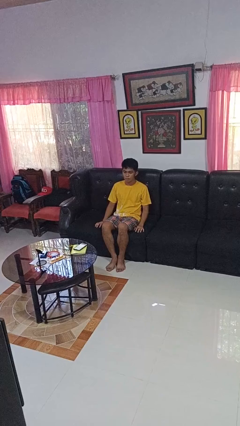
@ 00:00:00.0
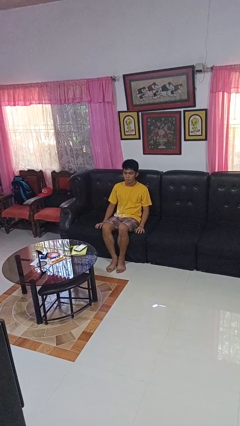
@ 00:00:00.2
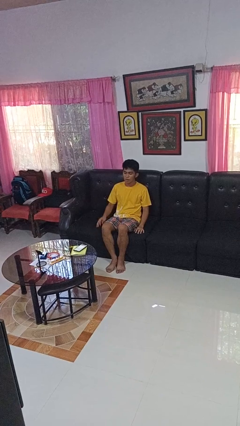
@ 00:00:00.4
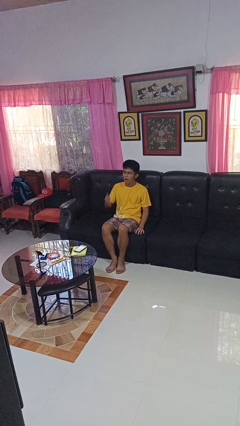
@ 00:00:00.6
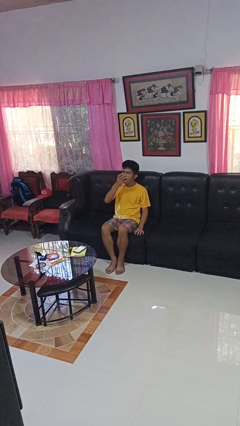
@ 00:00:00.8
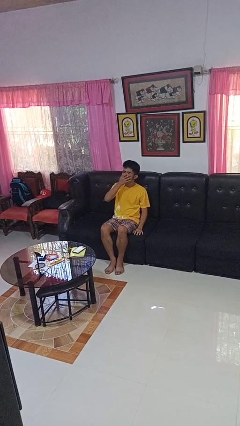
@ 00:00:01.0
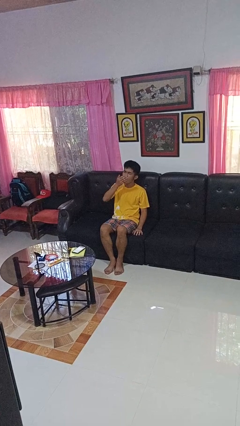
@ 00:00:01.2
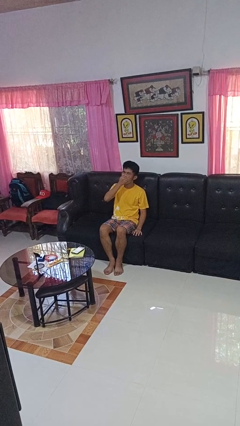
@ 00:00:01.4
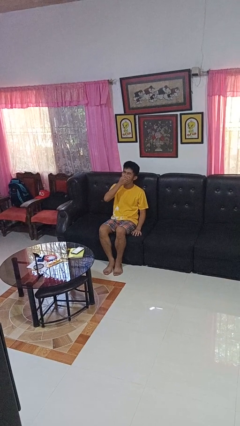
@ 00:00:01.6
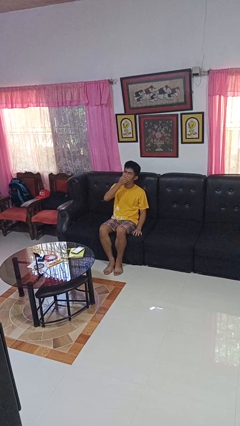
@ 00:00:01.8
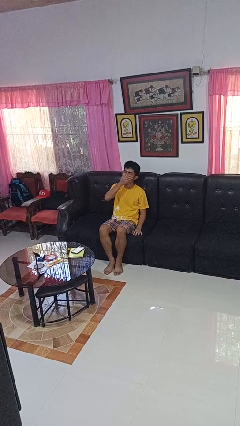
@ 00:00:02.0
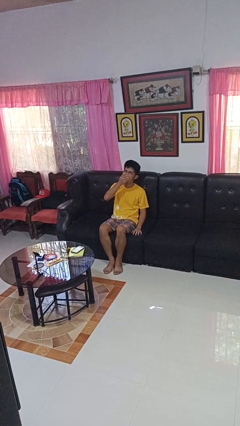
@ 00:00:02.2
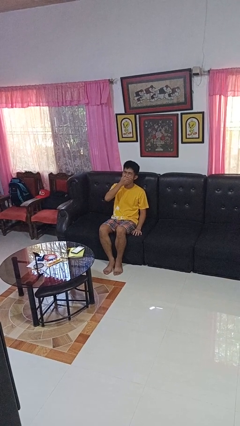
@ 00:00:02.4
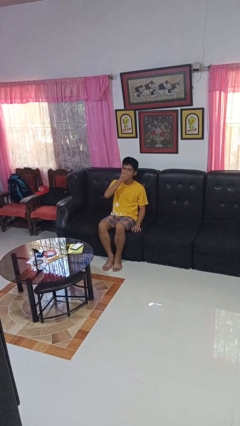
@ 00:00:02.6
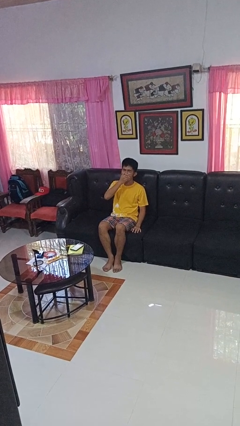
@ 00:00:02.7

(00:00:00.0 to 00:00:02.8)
person yawns

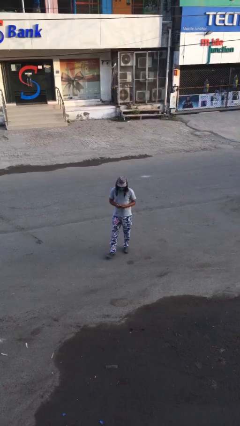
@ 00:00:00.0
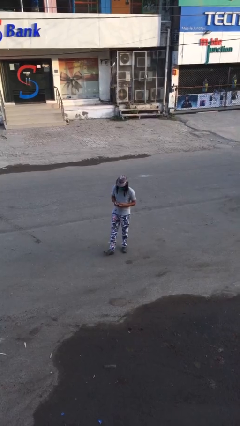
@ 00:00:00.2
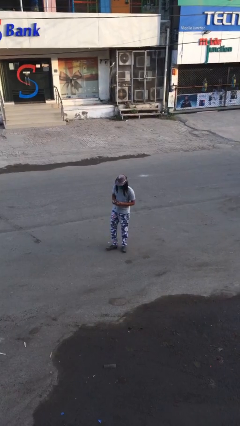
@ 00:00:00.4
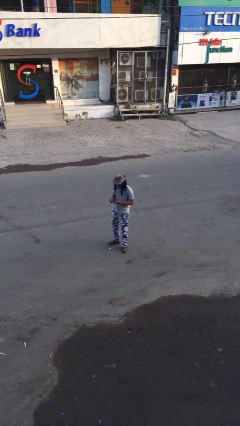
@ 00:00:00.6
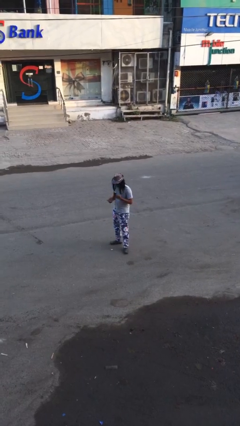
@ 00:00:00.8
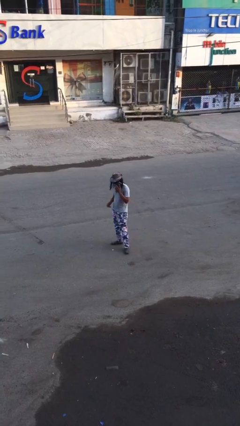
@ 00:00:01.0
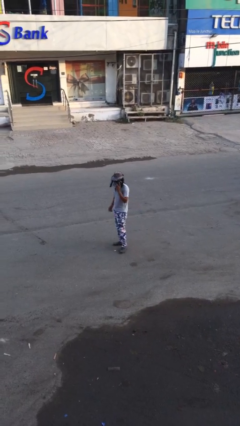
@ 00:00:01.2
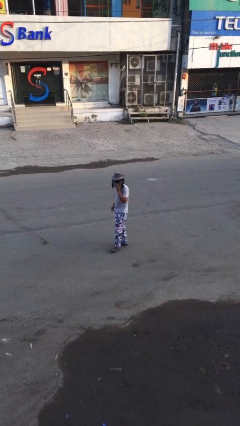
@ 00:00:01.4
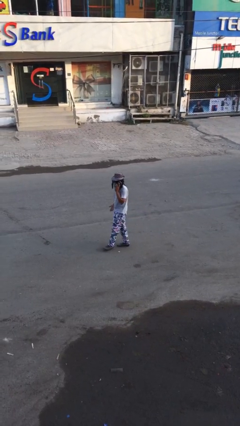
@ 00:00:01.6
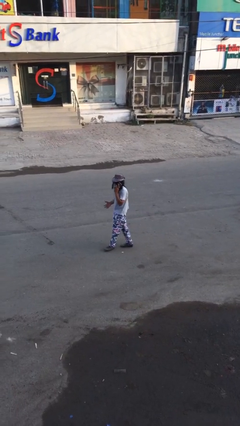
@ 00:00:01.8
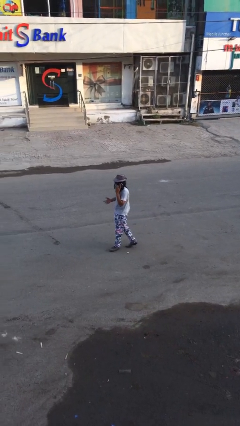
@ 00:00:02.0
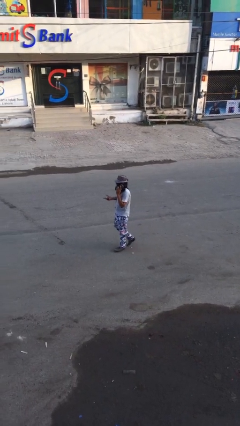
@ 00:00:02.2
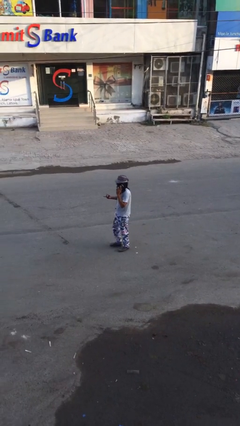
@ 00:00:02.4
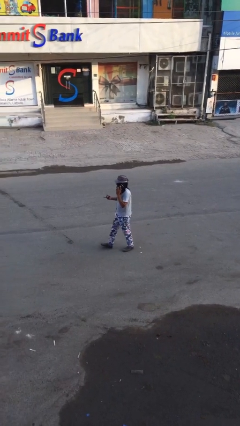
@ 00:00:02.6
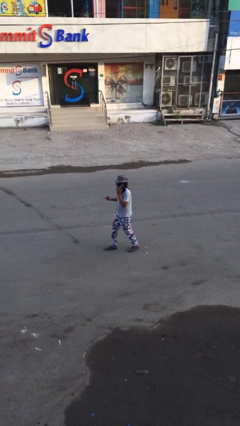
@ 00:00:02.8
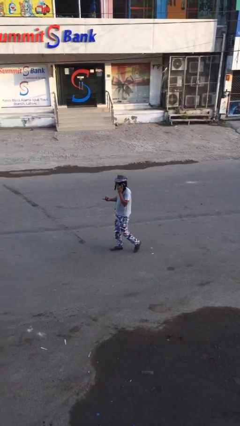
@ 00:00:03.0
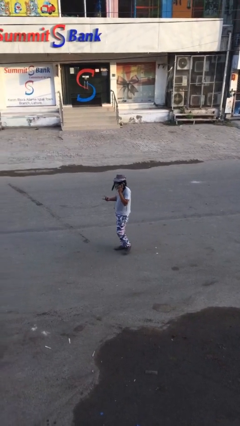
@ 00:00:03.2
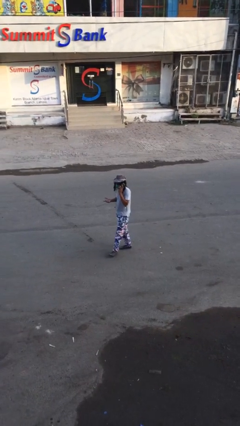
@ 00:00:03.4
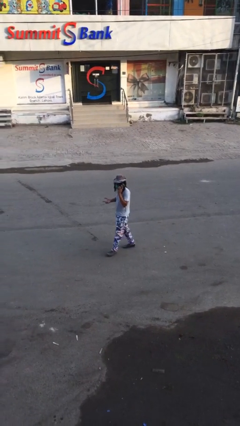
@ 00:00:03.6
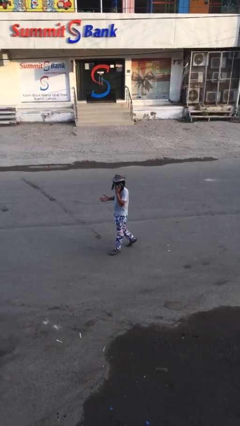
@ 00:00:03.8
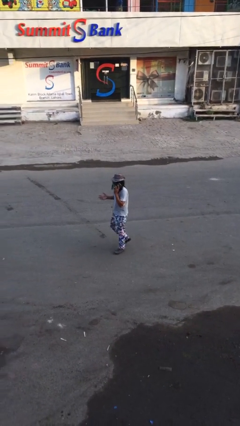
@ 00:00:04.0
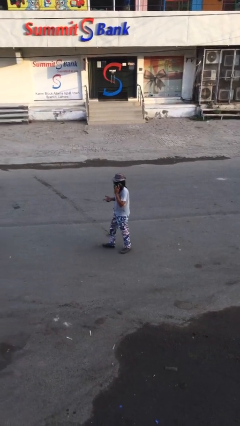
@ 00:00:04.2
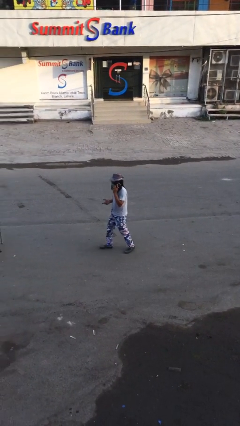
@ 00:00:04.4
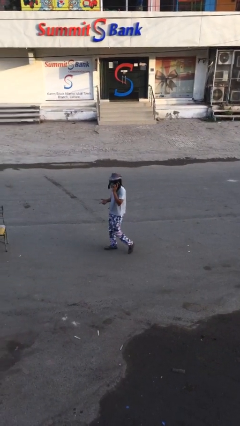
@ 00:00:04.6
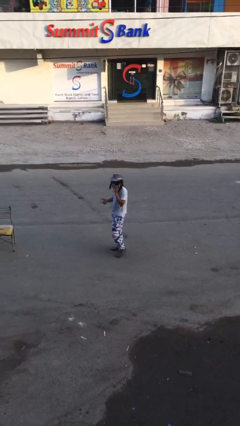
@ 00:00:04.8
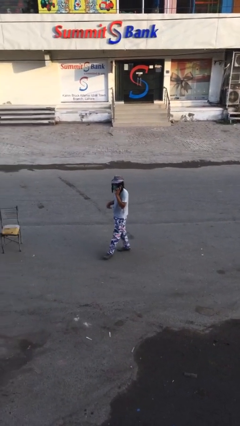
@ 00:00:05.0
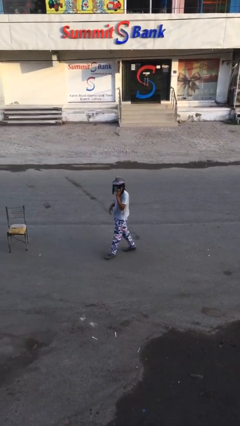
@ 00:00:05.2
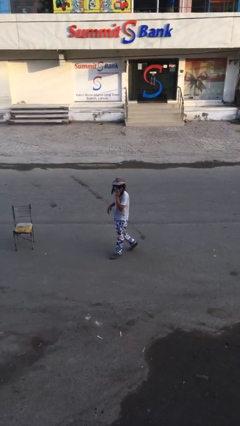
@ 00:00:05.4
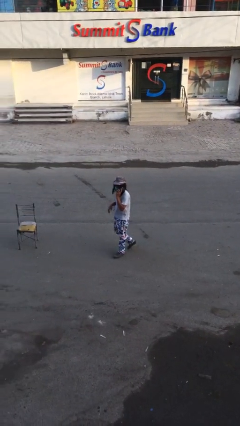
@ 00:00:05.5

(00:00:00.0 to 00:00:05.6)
person talks on phone

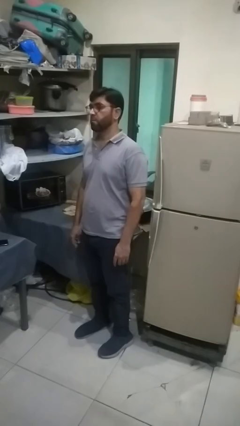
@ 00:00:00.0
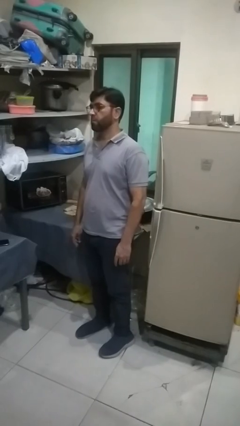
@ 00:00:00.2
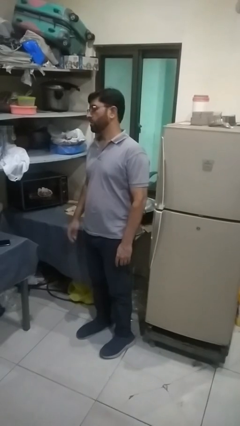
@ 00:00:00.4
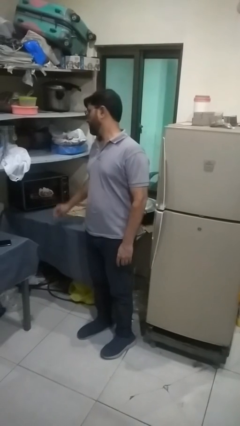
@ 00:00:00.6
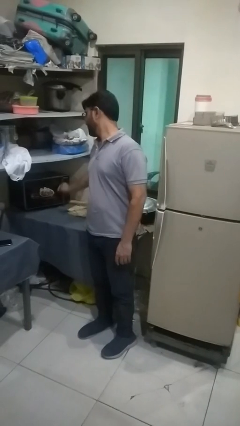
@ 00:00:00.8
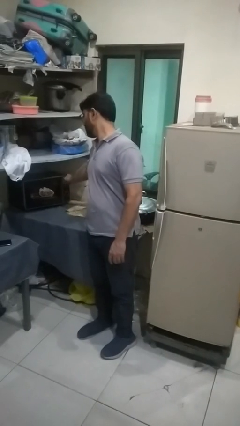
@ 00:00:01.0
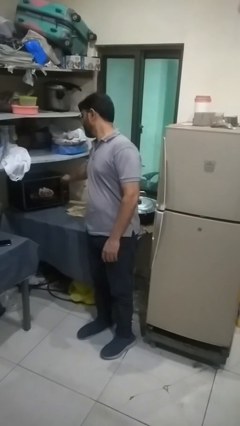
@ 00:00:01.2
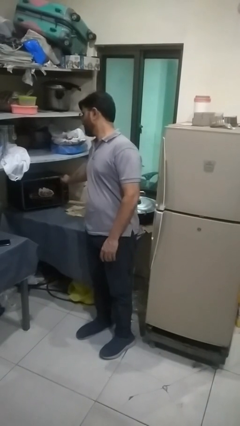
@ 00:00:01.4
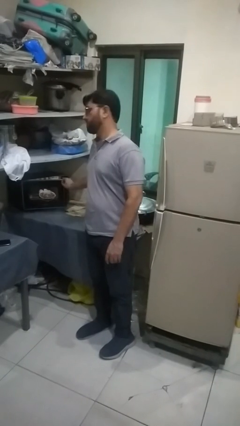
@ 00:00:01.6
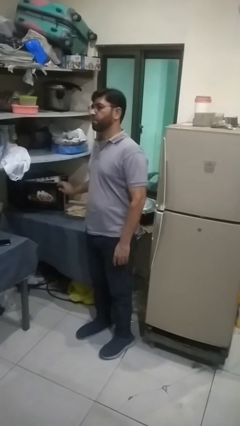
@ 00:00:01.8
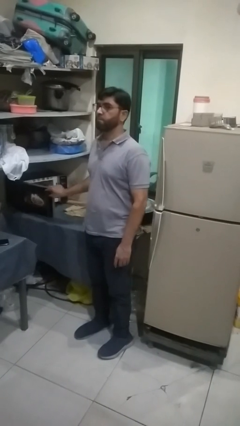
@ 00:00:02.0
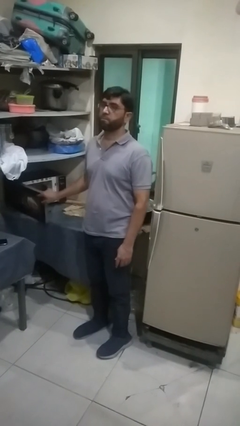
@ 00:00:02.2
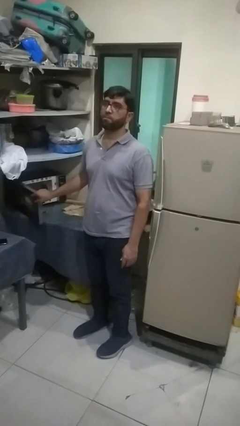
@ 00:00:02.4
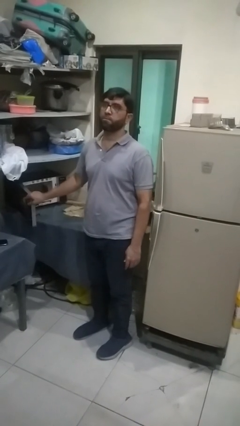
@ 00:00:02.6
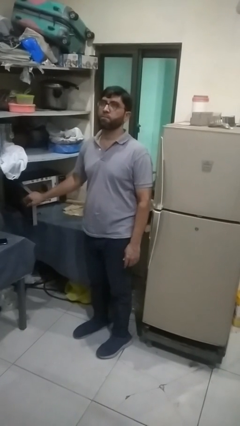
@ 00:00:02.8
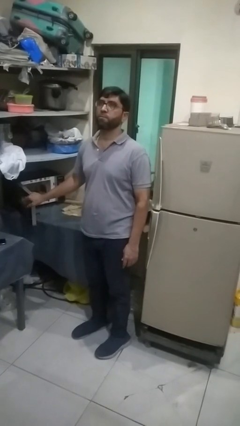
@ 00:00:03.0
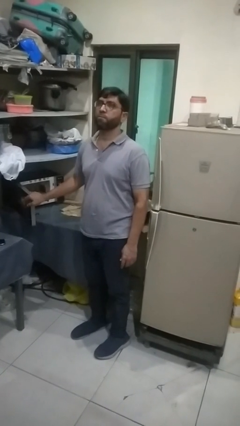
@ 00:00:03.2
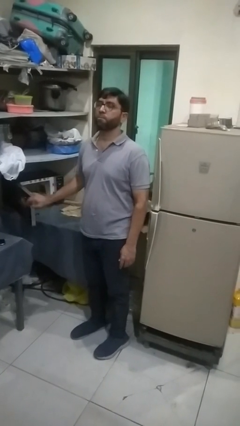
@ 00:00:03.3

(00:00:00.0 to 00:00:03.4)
person opens oven door

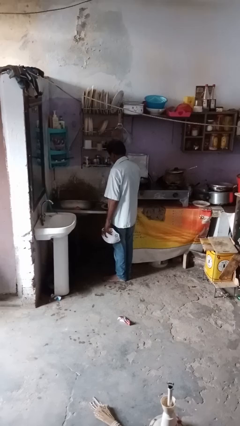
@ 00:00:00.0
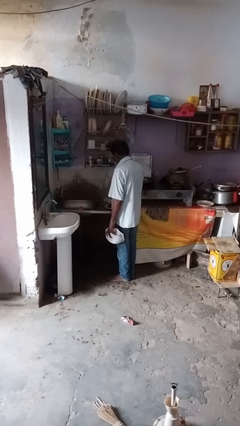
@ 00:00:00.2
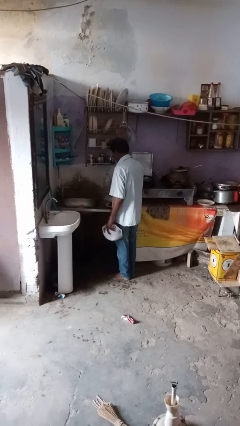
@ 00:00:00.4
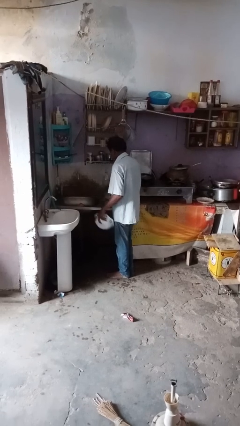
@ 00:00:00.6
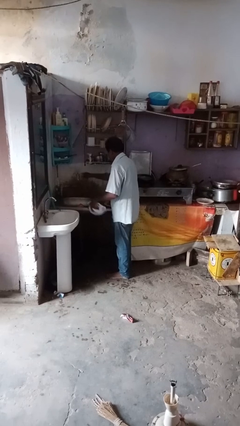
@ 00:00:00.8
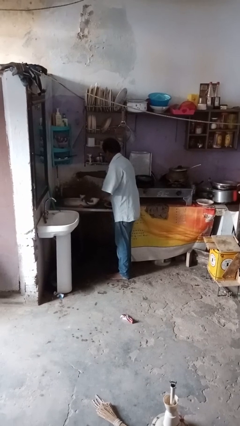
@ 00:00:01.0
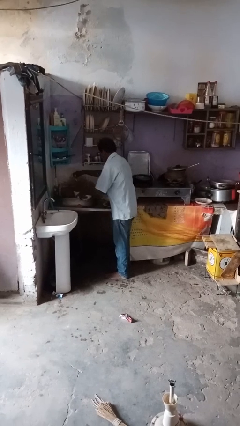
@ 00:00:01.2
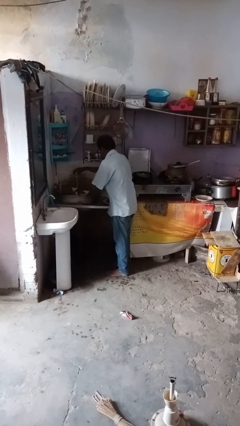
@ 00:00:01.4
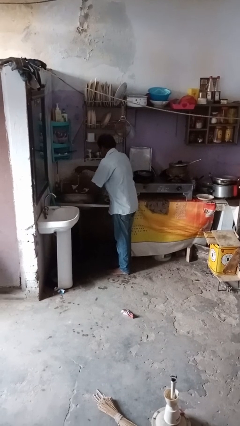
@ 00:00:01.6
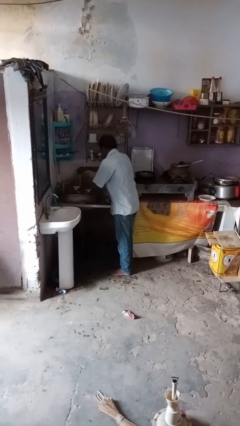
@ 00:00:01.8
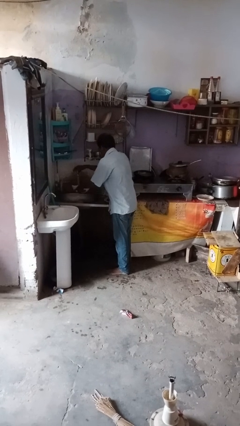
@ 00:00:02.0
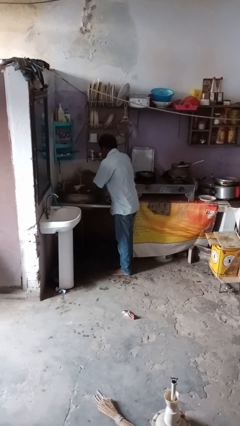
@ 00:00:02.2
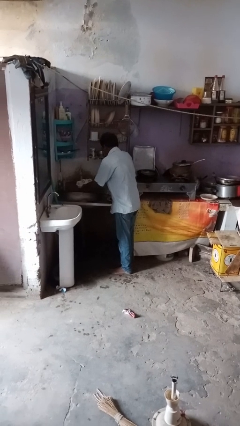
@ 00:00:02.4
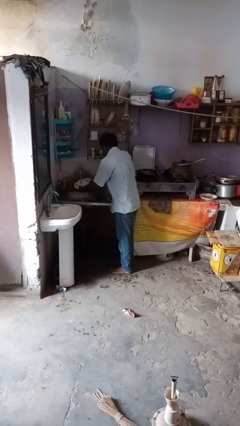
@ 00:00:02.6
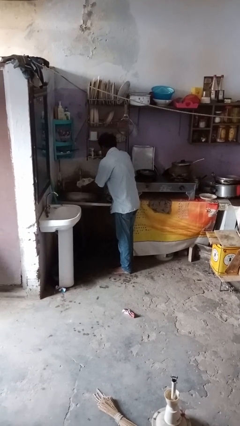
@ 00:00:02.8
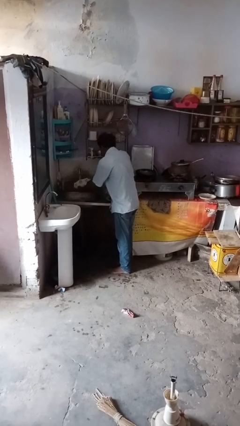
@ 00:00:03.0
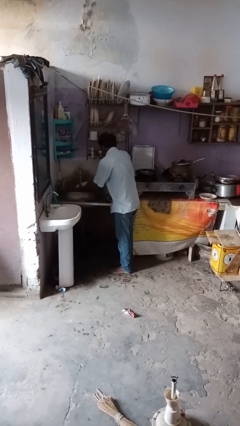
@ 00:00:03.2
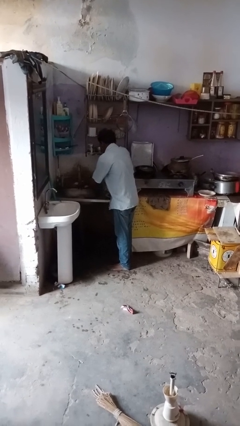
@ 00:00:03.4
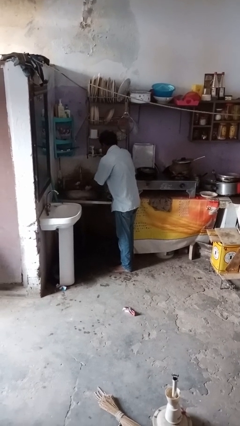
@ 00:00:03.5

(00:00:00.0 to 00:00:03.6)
person washes dish

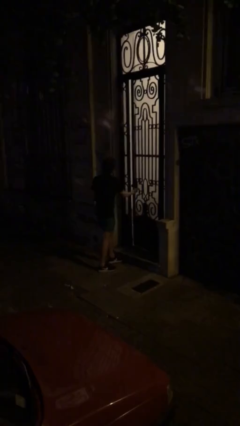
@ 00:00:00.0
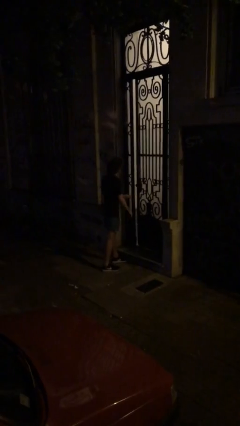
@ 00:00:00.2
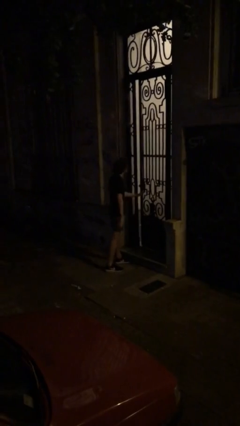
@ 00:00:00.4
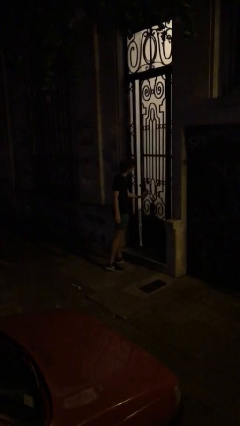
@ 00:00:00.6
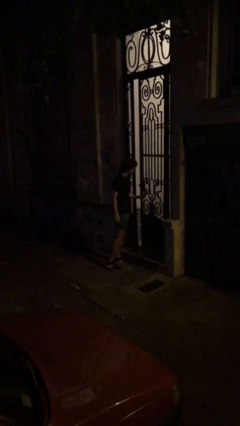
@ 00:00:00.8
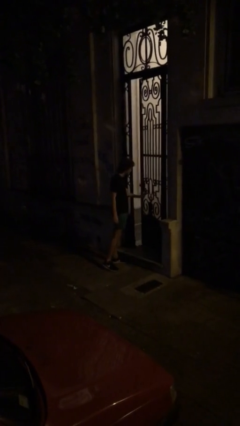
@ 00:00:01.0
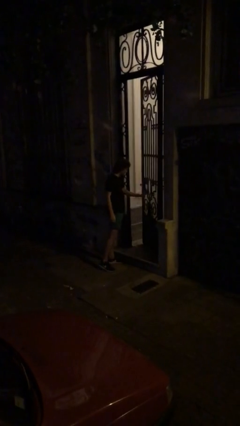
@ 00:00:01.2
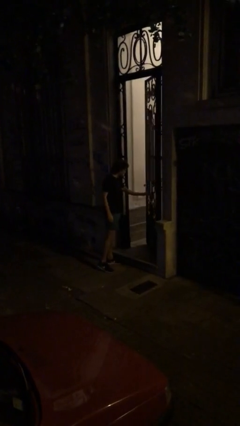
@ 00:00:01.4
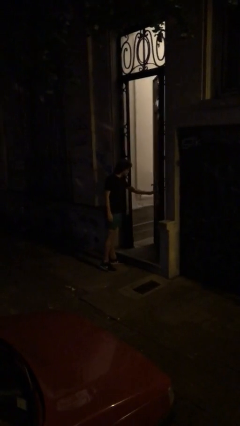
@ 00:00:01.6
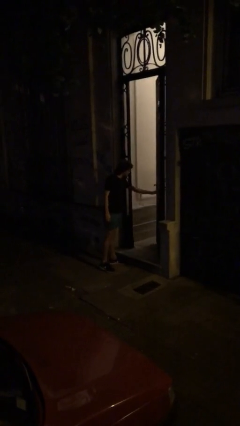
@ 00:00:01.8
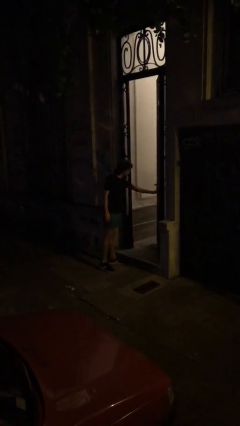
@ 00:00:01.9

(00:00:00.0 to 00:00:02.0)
person opens facility door
